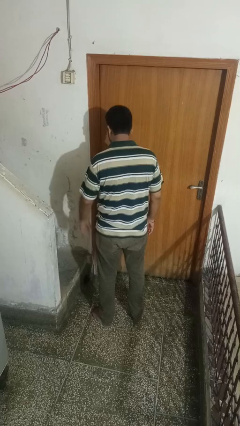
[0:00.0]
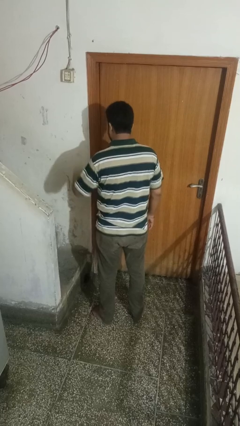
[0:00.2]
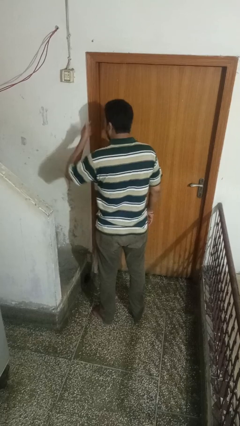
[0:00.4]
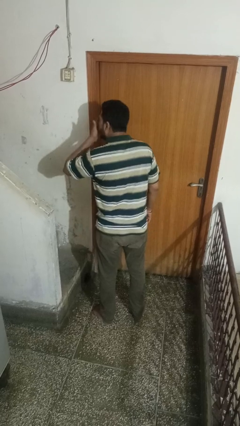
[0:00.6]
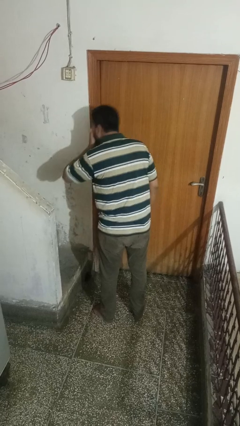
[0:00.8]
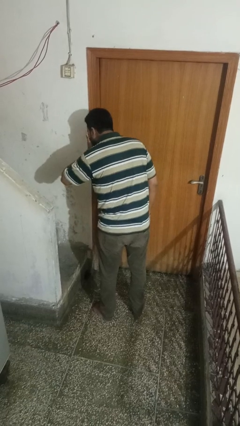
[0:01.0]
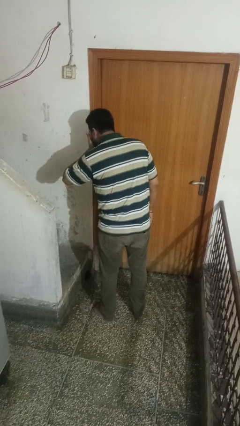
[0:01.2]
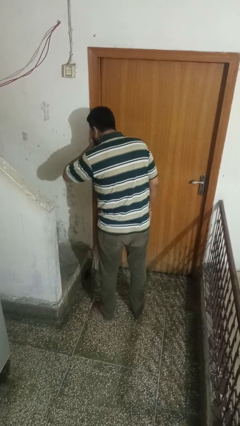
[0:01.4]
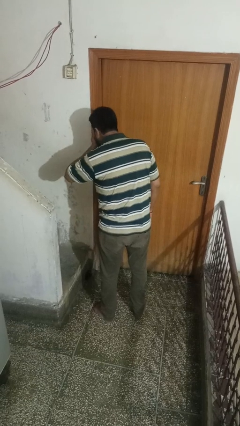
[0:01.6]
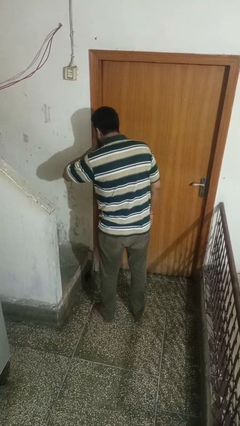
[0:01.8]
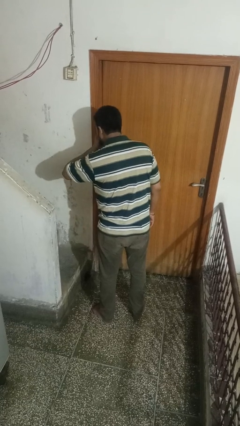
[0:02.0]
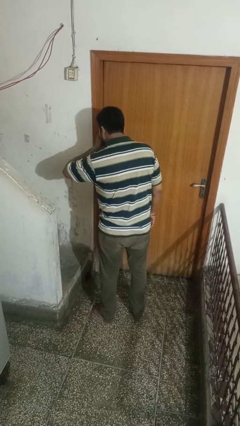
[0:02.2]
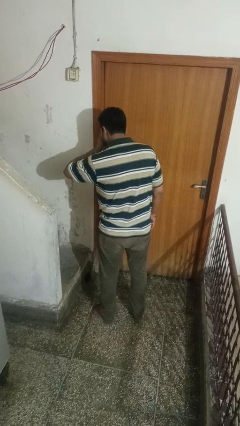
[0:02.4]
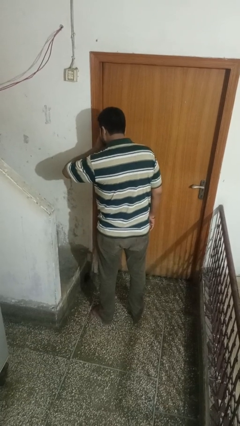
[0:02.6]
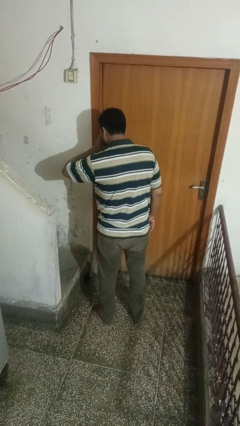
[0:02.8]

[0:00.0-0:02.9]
person sneezes into hand

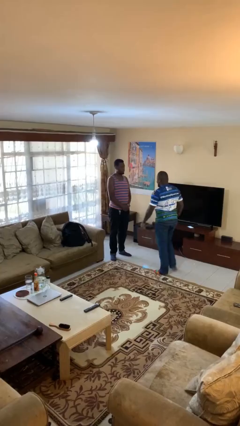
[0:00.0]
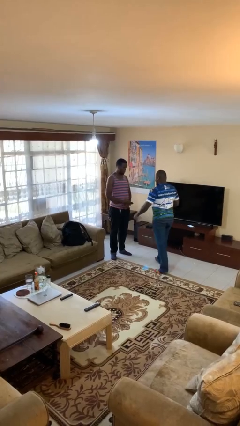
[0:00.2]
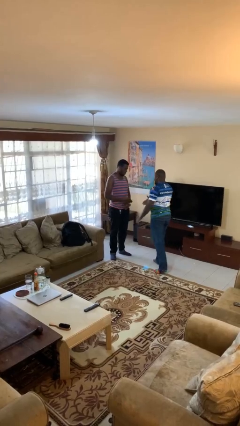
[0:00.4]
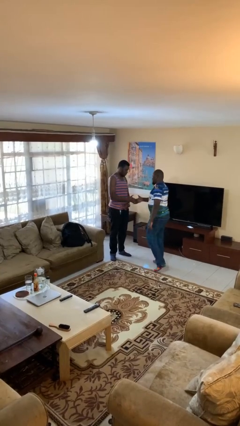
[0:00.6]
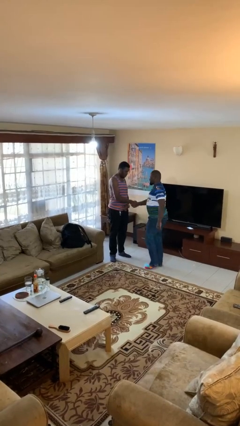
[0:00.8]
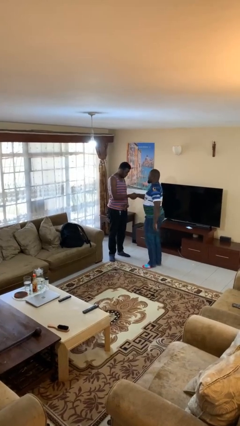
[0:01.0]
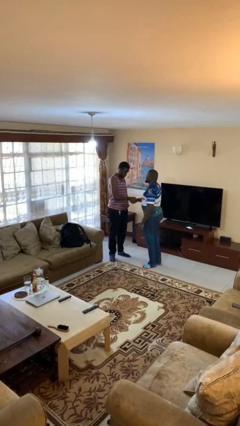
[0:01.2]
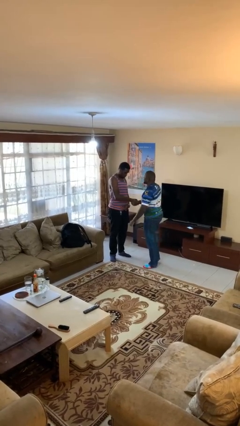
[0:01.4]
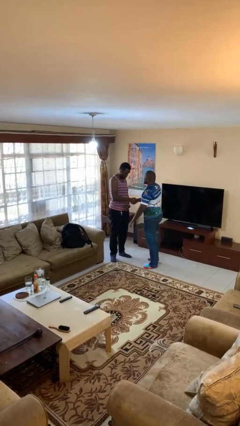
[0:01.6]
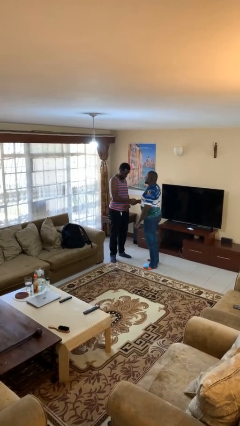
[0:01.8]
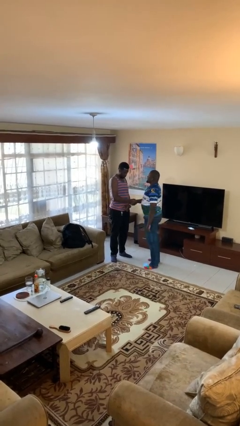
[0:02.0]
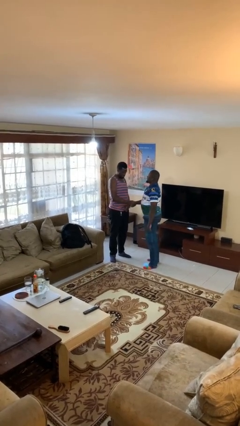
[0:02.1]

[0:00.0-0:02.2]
person shakes hand

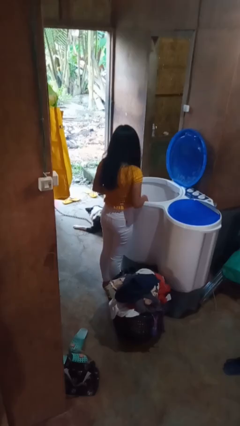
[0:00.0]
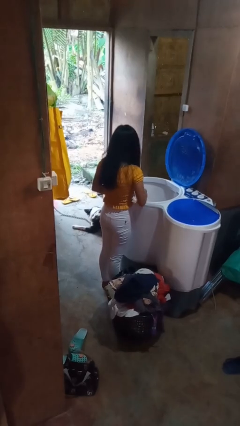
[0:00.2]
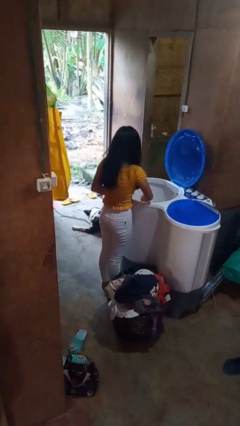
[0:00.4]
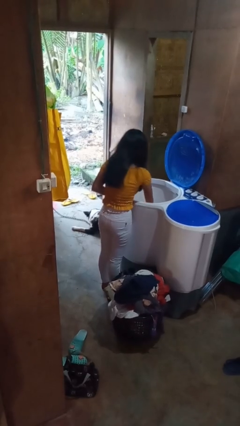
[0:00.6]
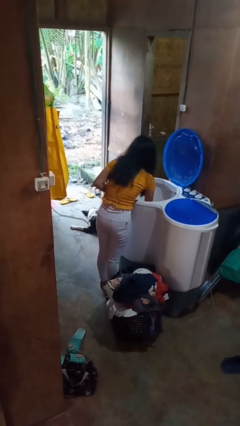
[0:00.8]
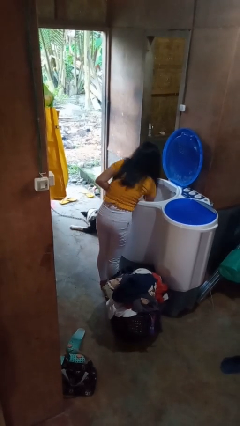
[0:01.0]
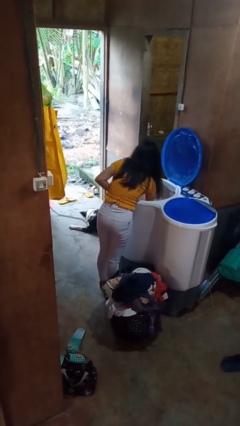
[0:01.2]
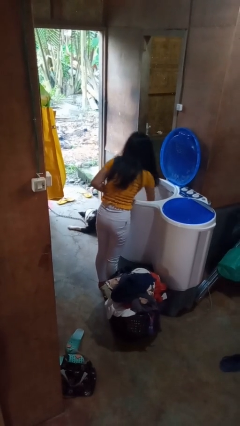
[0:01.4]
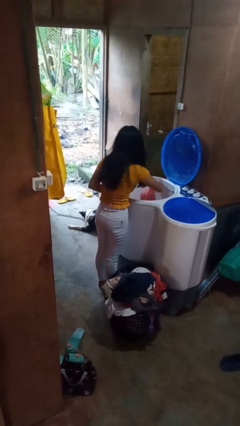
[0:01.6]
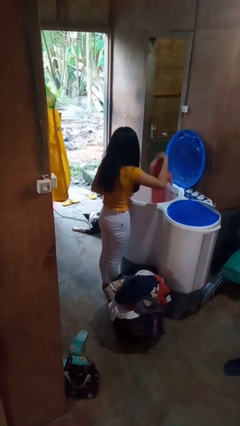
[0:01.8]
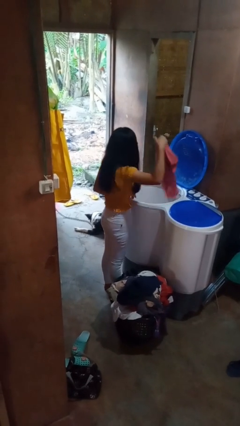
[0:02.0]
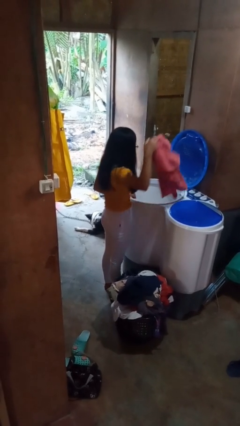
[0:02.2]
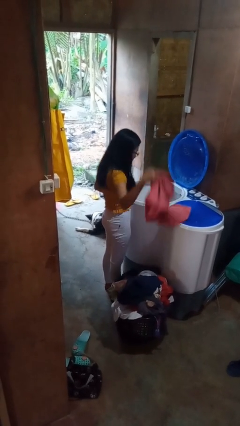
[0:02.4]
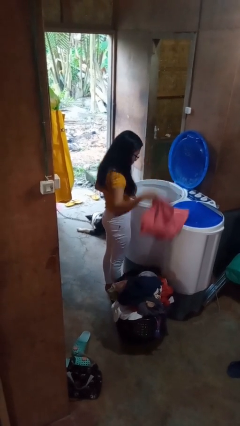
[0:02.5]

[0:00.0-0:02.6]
person unloads clotheswasher

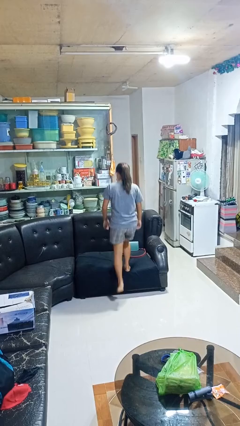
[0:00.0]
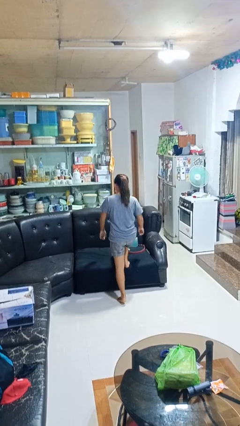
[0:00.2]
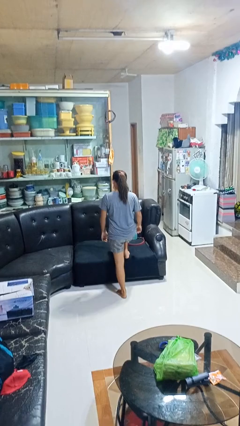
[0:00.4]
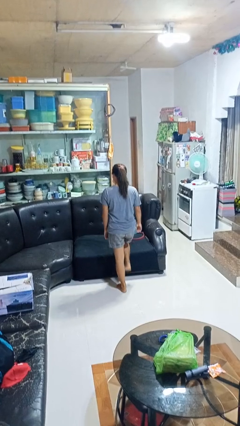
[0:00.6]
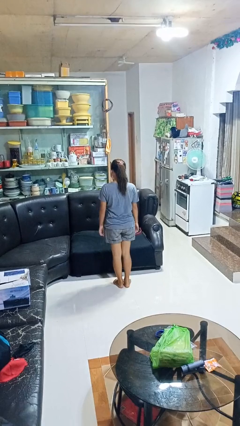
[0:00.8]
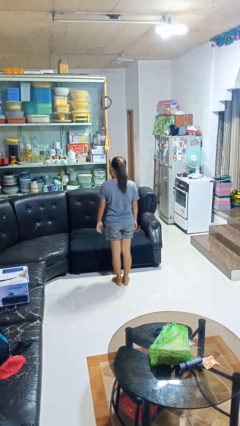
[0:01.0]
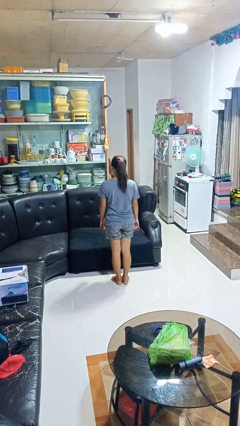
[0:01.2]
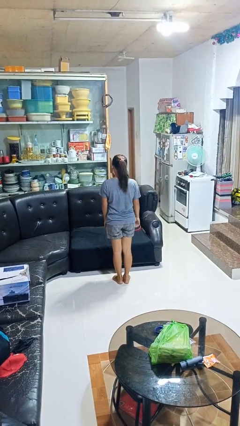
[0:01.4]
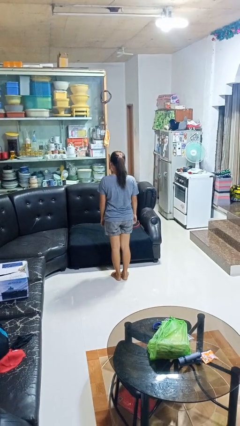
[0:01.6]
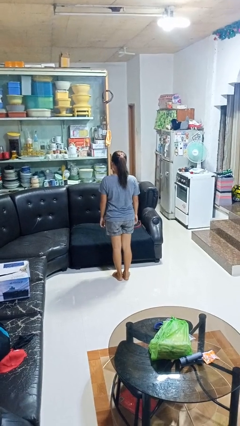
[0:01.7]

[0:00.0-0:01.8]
person climbs off couch

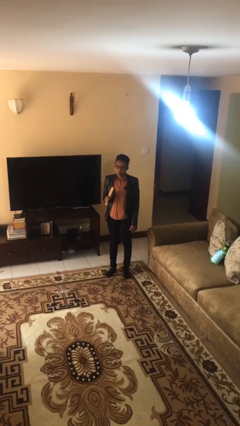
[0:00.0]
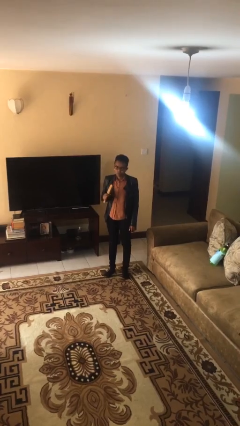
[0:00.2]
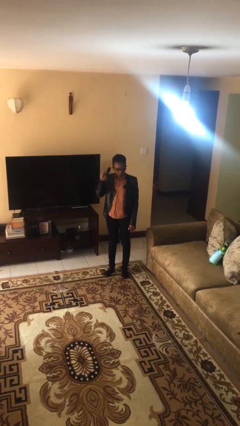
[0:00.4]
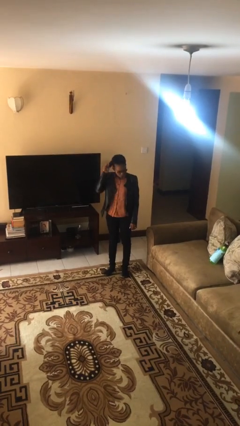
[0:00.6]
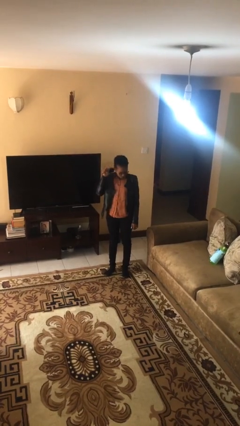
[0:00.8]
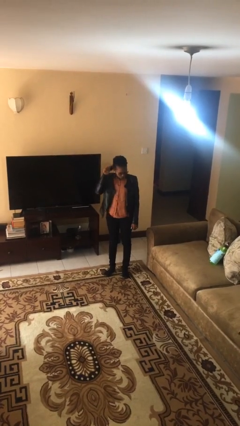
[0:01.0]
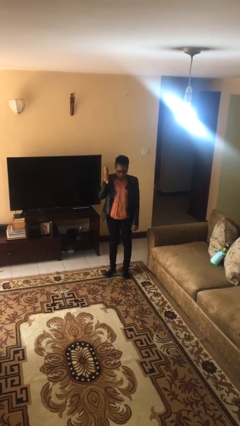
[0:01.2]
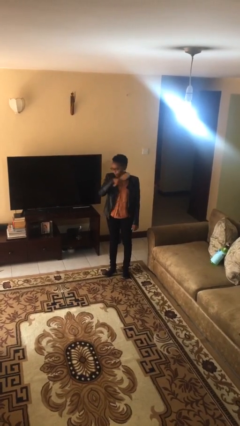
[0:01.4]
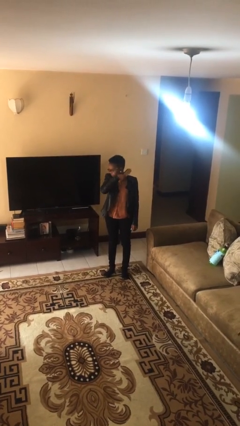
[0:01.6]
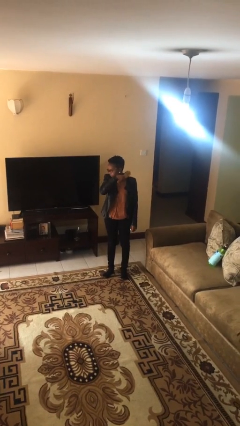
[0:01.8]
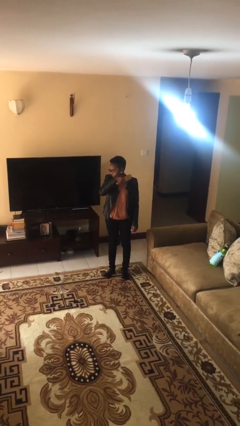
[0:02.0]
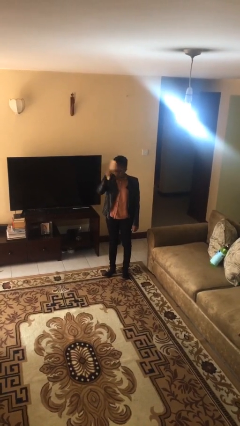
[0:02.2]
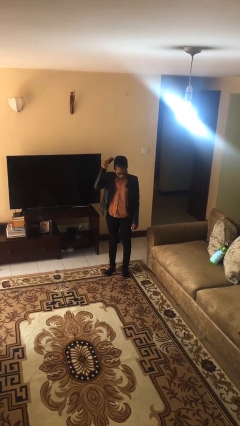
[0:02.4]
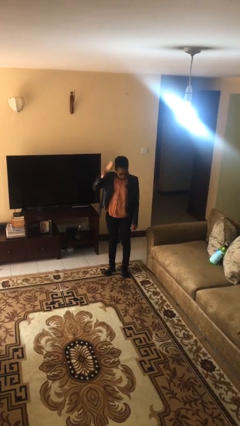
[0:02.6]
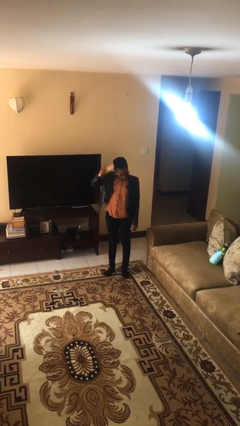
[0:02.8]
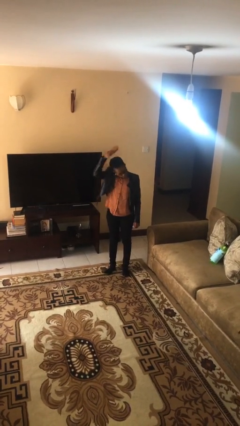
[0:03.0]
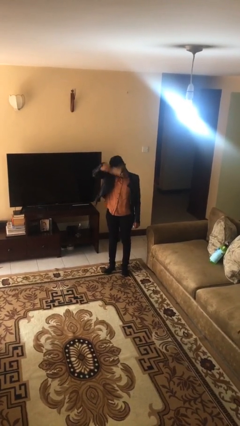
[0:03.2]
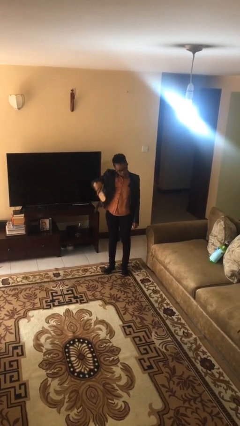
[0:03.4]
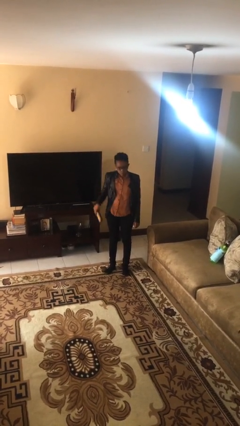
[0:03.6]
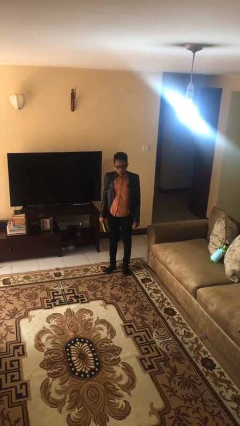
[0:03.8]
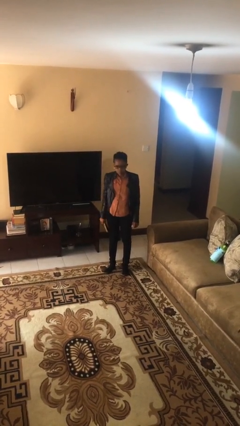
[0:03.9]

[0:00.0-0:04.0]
person brushes hair

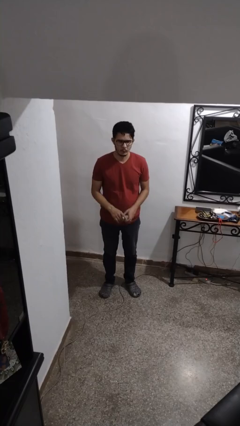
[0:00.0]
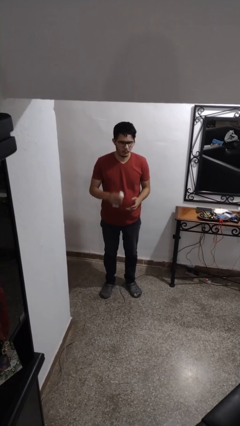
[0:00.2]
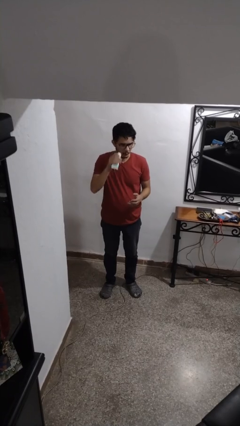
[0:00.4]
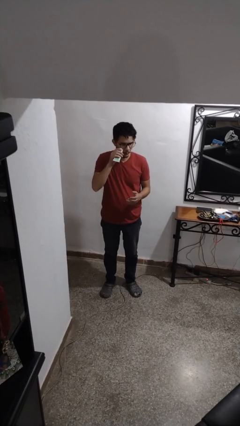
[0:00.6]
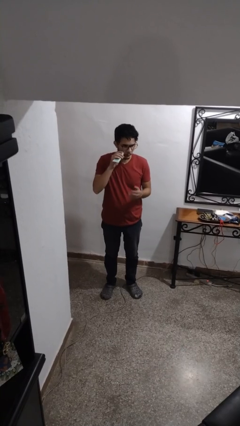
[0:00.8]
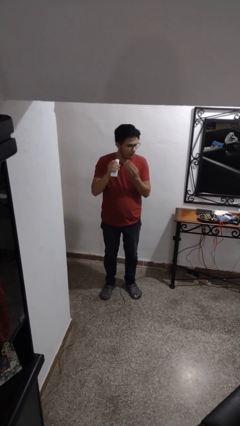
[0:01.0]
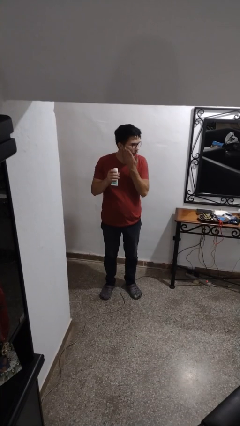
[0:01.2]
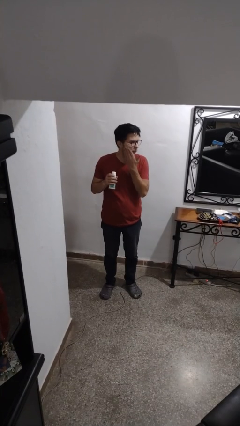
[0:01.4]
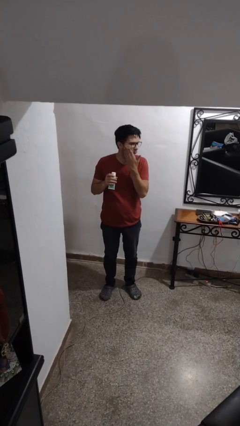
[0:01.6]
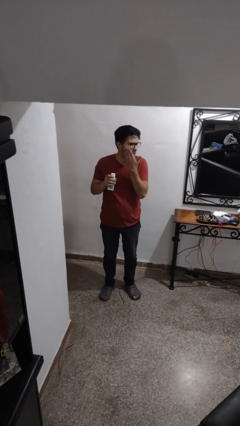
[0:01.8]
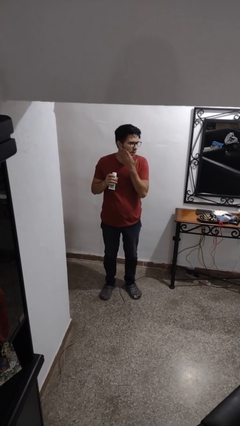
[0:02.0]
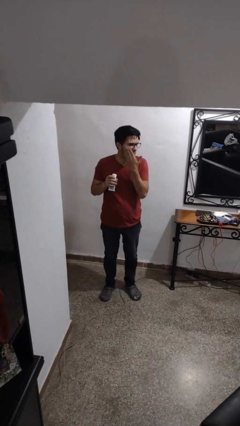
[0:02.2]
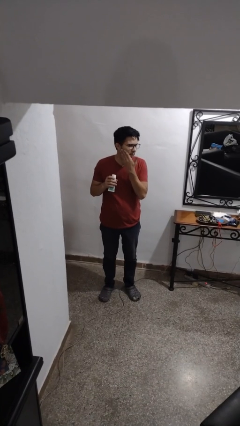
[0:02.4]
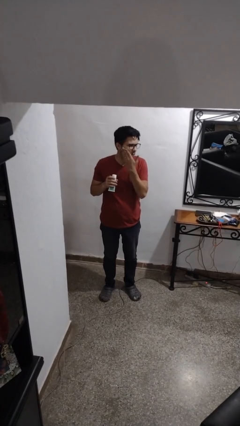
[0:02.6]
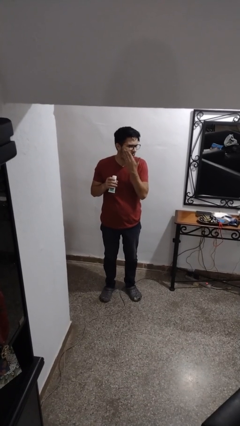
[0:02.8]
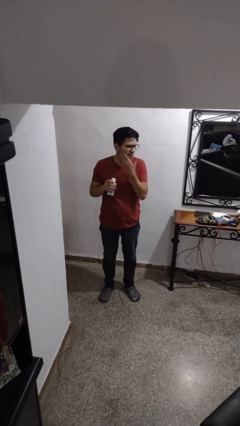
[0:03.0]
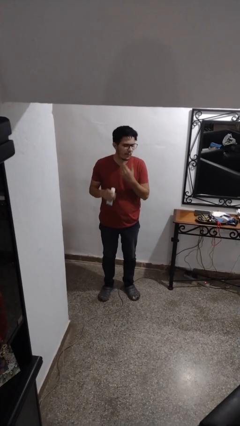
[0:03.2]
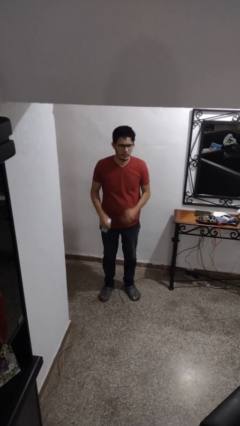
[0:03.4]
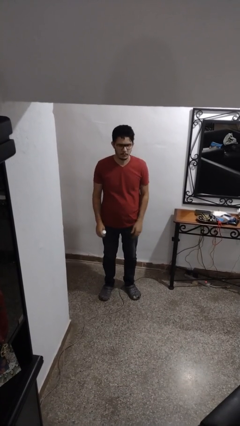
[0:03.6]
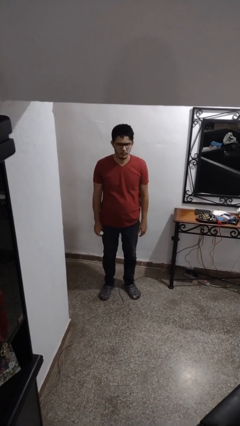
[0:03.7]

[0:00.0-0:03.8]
person applies sunscreen

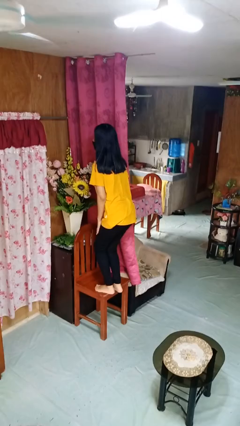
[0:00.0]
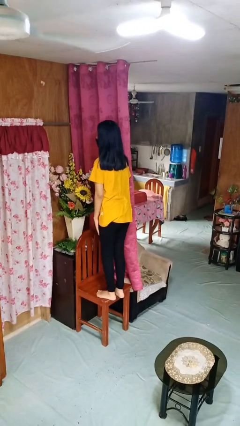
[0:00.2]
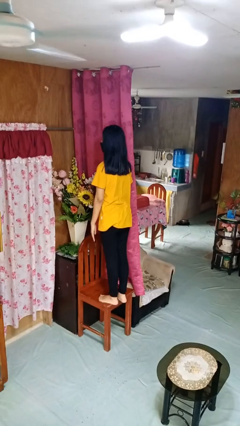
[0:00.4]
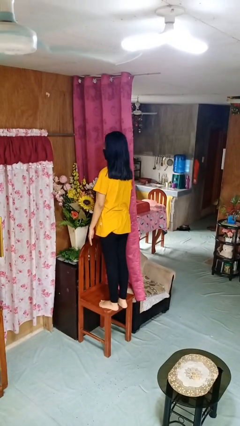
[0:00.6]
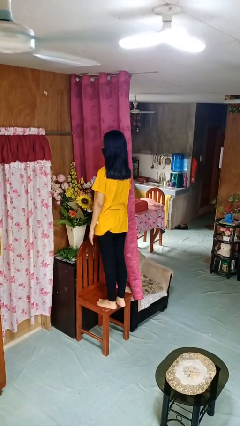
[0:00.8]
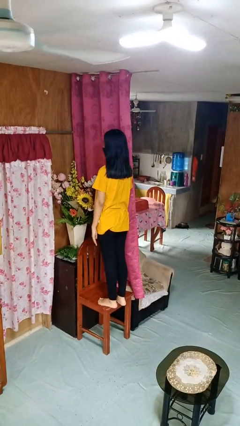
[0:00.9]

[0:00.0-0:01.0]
person climbs on chair
